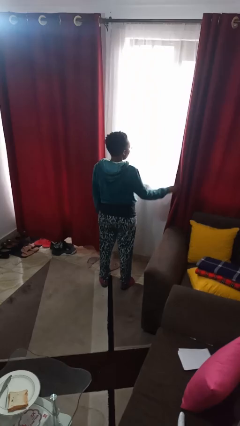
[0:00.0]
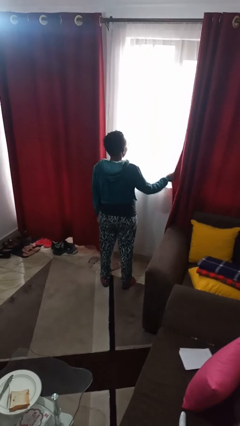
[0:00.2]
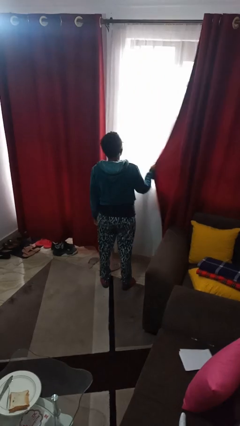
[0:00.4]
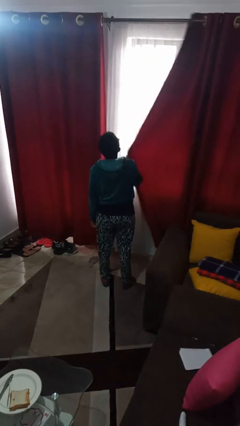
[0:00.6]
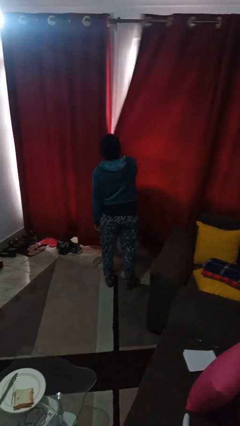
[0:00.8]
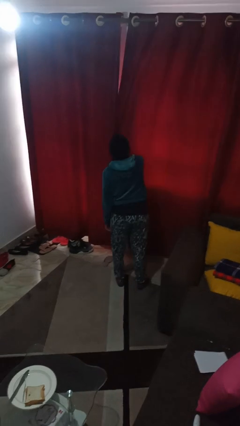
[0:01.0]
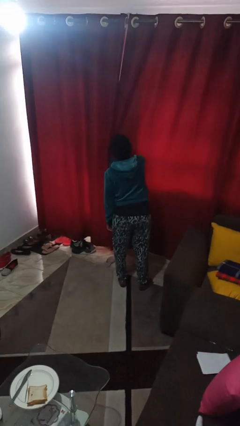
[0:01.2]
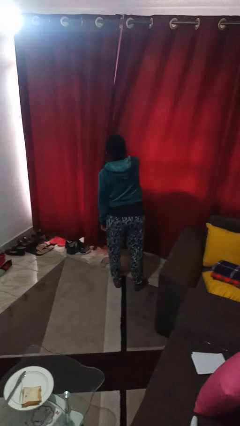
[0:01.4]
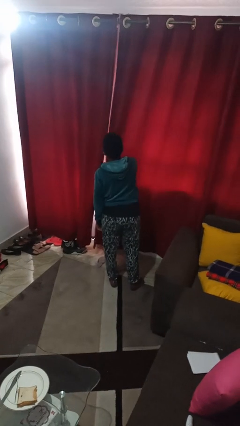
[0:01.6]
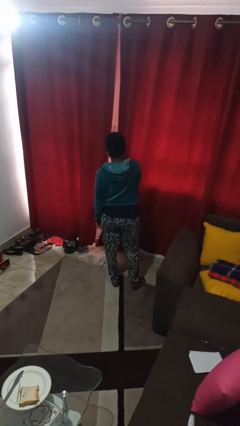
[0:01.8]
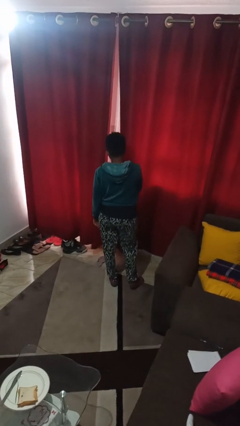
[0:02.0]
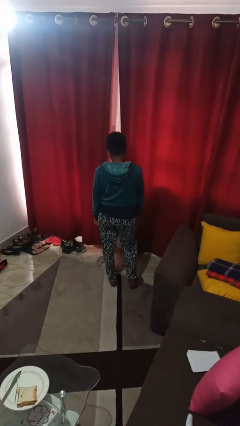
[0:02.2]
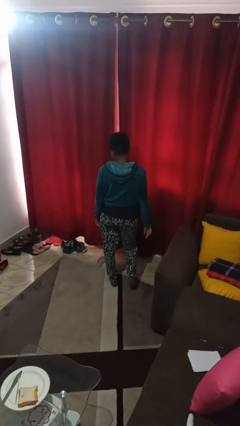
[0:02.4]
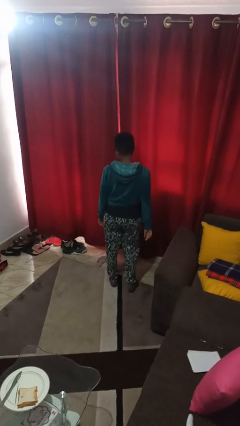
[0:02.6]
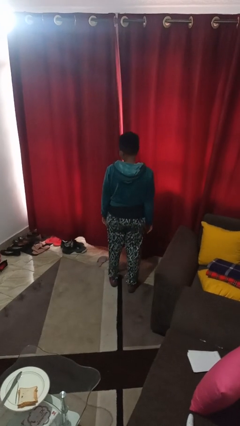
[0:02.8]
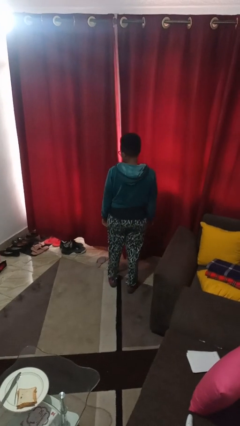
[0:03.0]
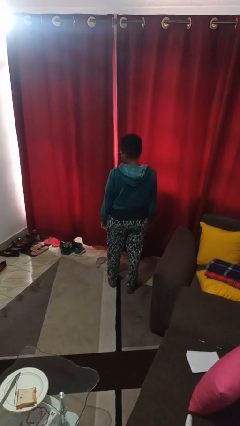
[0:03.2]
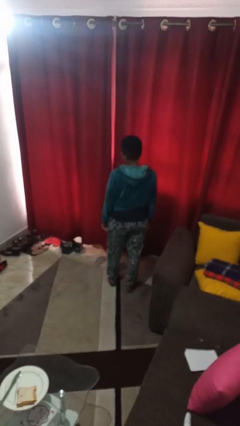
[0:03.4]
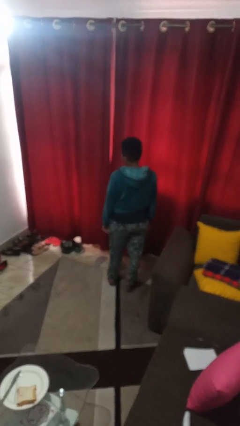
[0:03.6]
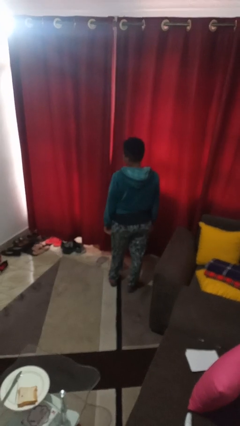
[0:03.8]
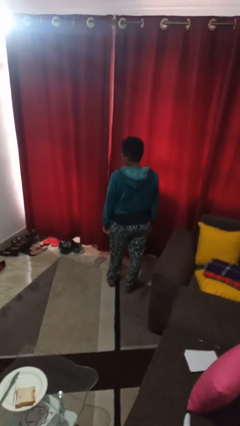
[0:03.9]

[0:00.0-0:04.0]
person closes curtains

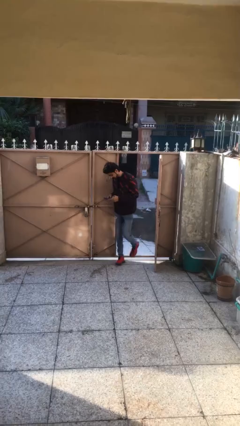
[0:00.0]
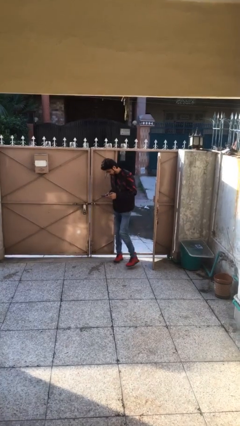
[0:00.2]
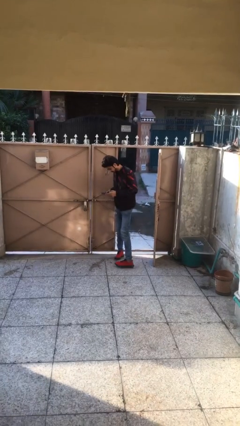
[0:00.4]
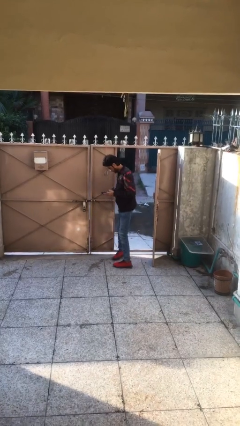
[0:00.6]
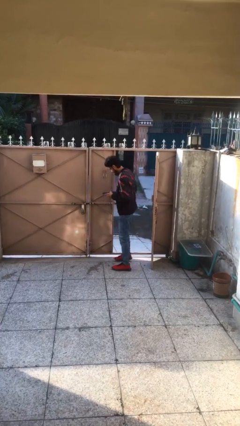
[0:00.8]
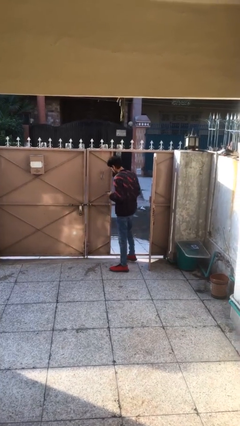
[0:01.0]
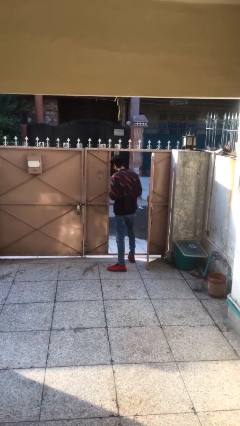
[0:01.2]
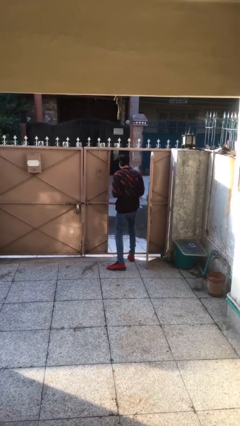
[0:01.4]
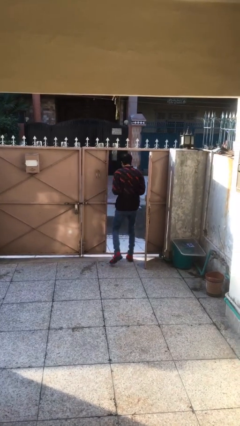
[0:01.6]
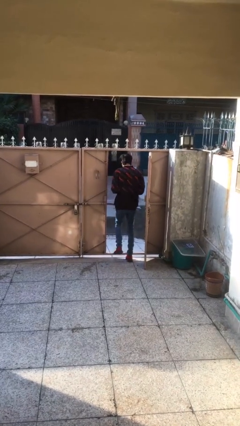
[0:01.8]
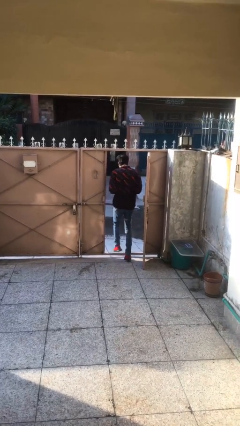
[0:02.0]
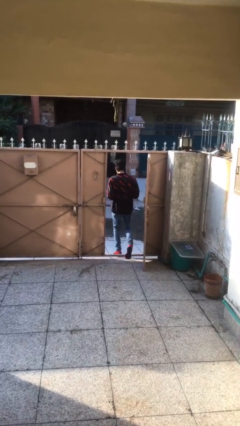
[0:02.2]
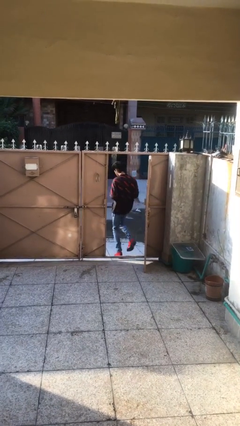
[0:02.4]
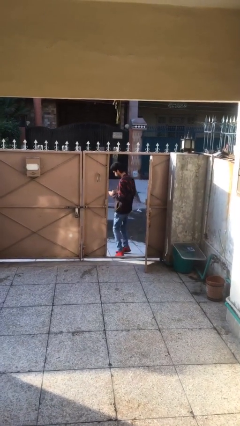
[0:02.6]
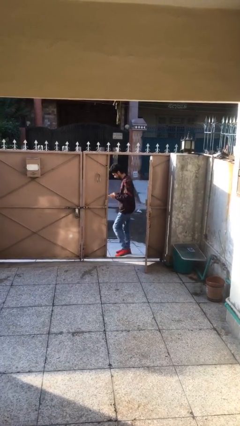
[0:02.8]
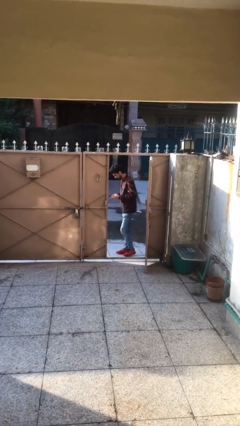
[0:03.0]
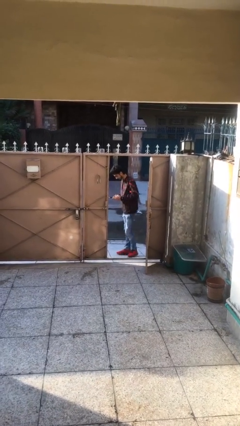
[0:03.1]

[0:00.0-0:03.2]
person exits scene through structure

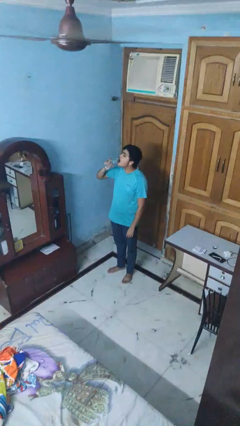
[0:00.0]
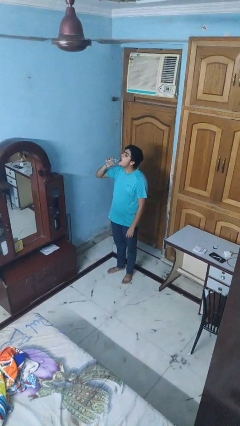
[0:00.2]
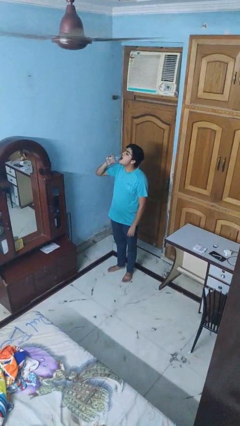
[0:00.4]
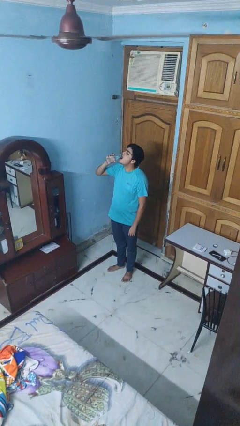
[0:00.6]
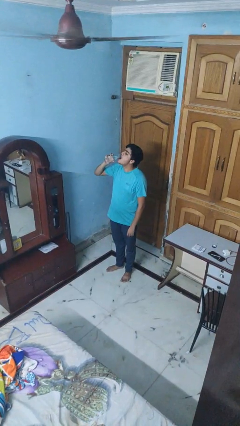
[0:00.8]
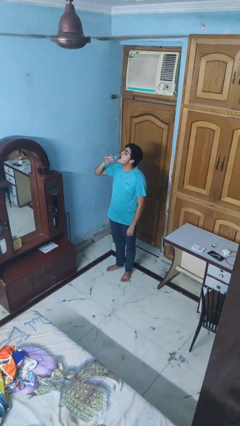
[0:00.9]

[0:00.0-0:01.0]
person drinks from bottle

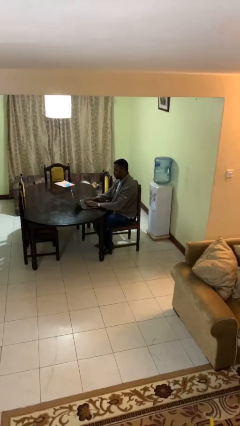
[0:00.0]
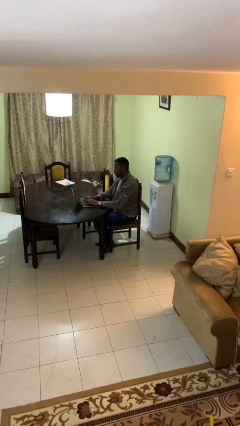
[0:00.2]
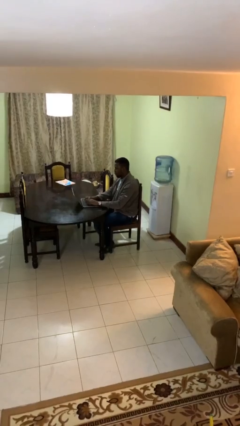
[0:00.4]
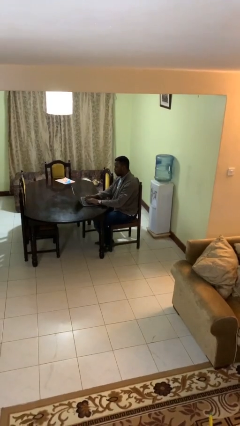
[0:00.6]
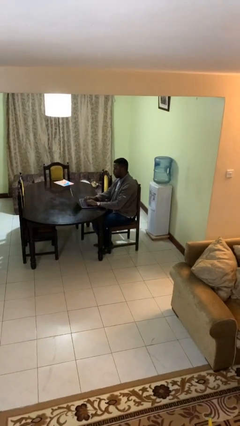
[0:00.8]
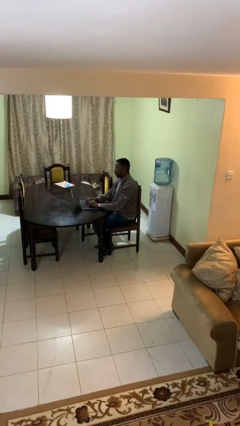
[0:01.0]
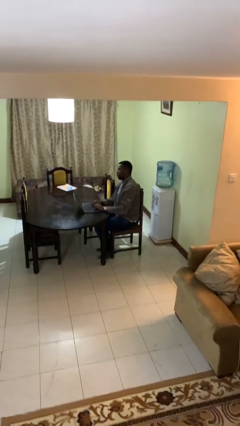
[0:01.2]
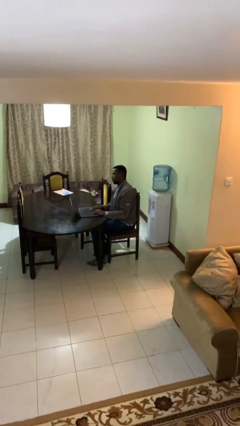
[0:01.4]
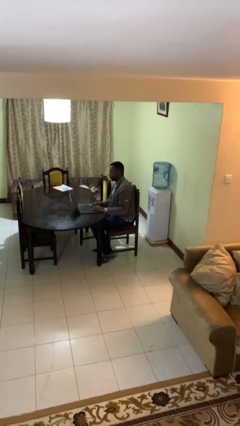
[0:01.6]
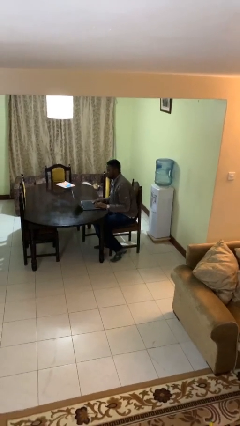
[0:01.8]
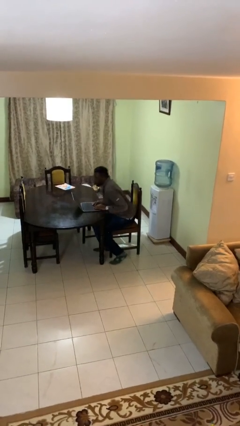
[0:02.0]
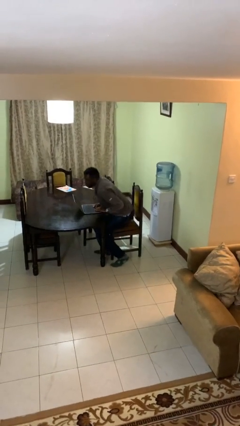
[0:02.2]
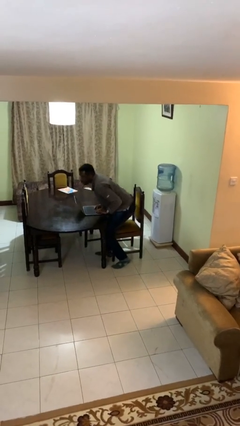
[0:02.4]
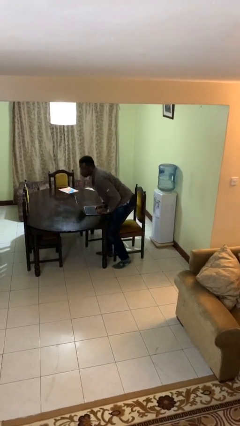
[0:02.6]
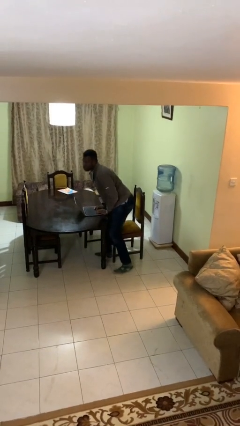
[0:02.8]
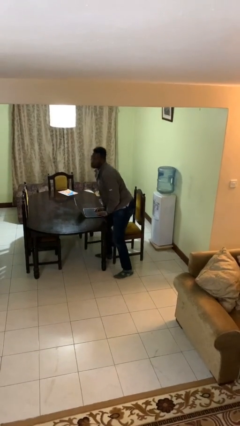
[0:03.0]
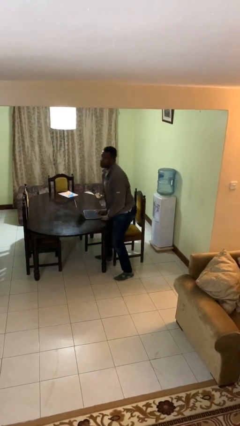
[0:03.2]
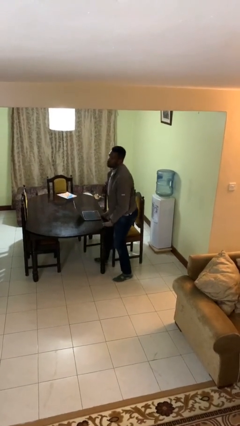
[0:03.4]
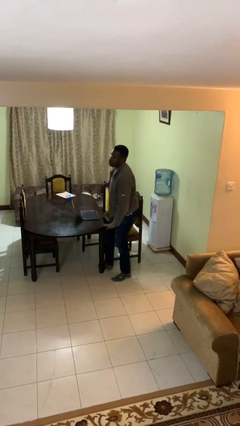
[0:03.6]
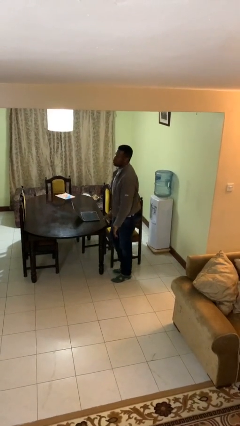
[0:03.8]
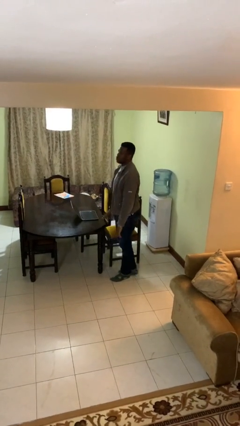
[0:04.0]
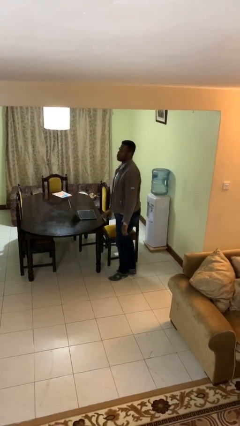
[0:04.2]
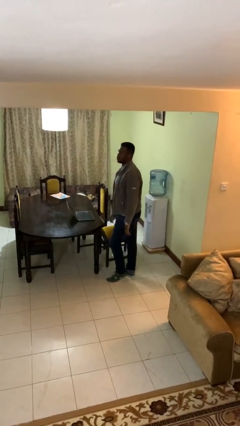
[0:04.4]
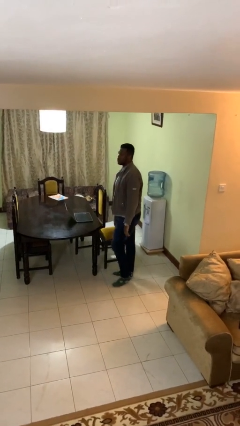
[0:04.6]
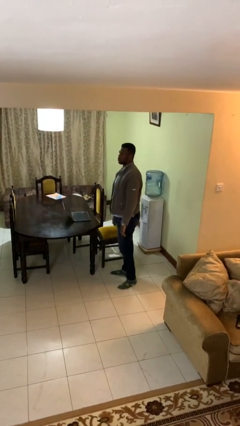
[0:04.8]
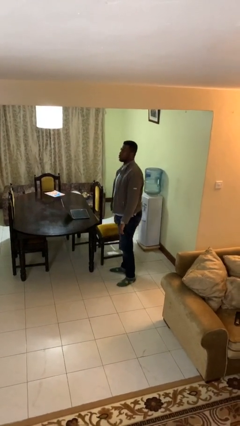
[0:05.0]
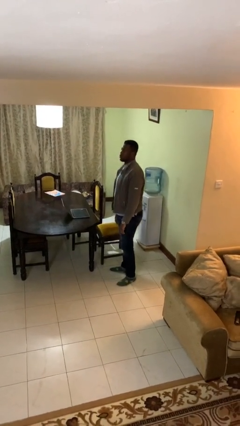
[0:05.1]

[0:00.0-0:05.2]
person stands up

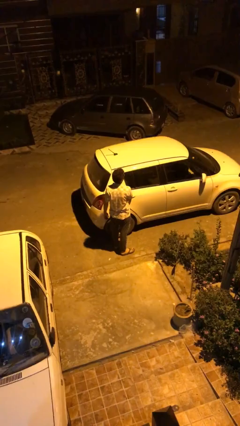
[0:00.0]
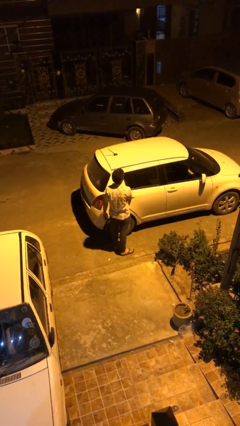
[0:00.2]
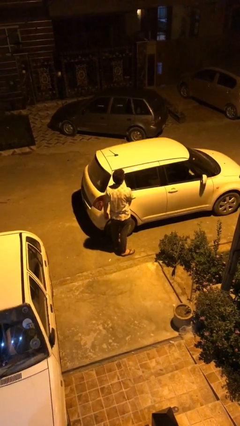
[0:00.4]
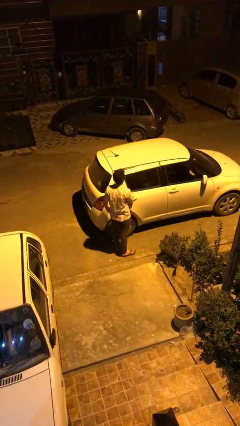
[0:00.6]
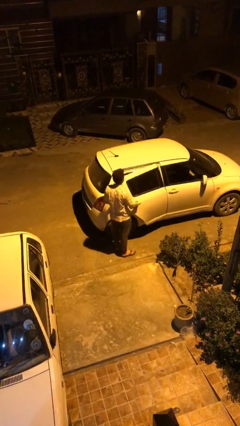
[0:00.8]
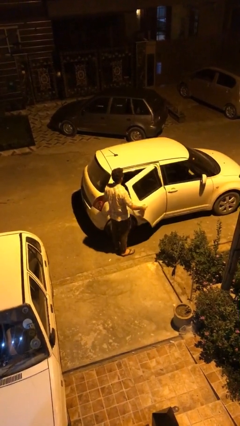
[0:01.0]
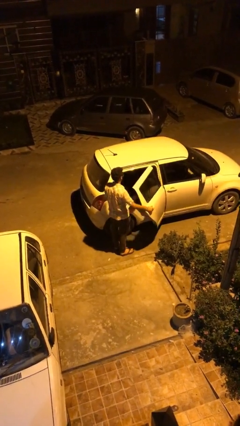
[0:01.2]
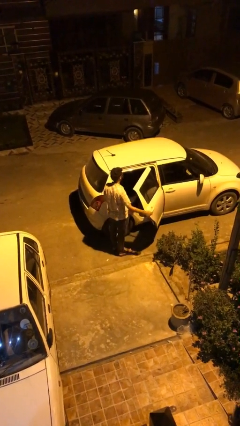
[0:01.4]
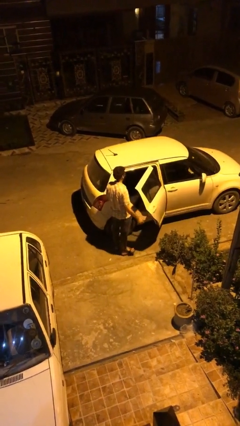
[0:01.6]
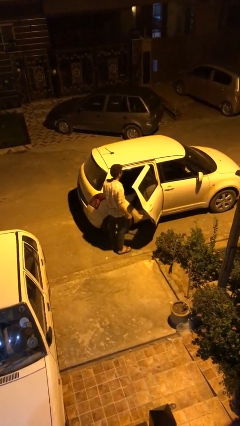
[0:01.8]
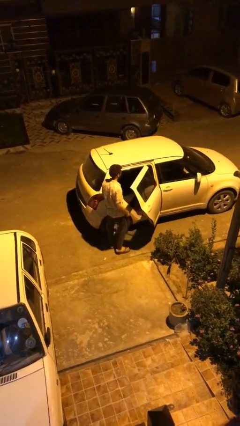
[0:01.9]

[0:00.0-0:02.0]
person opens car door

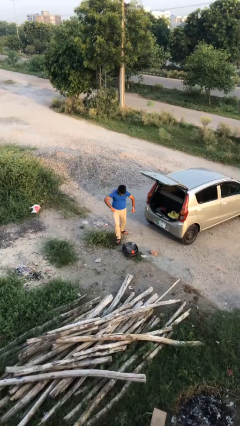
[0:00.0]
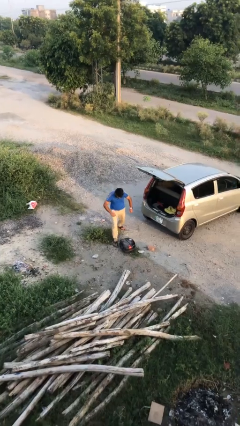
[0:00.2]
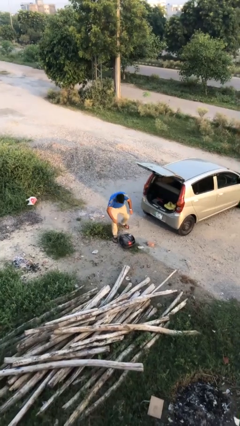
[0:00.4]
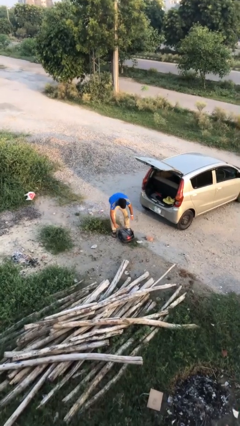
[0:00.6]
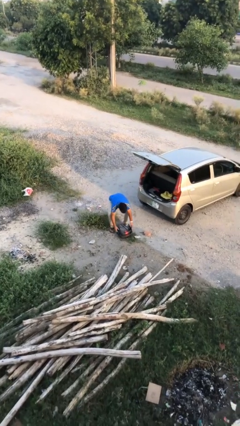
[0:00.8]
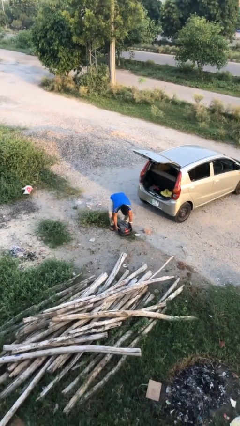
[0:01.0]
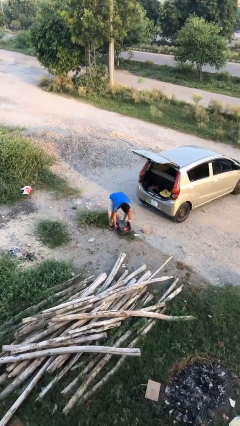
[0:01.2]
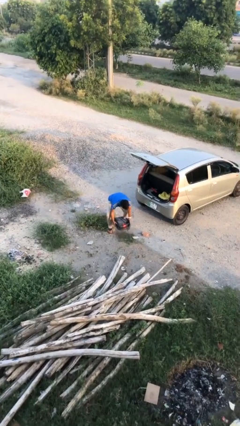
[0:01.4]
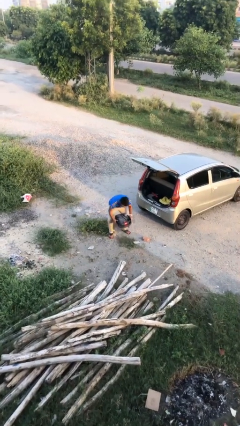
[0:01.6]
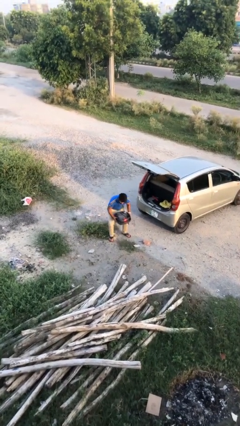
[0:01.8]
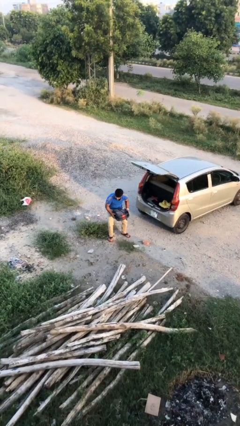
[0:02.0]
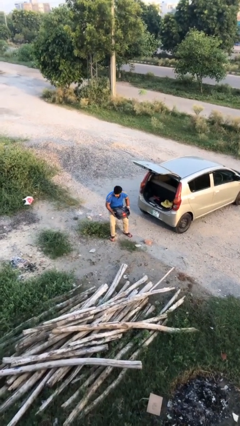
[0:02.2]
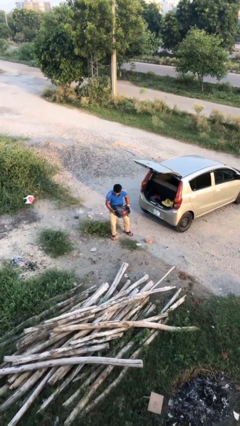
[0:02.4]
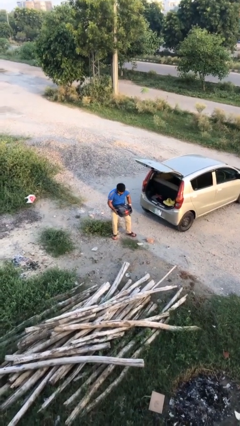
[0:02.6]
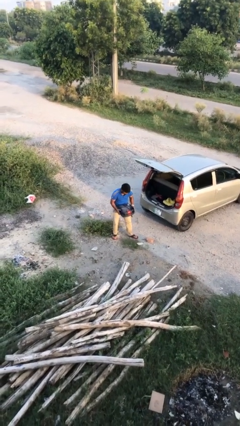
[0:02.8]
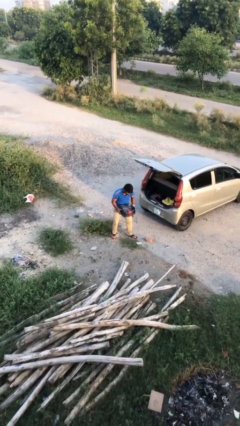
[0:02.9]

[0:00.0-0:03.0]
person picks up object from floor
